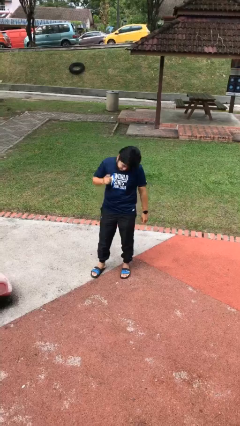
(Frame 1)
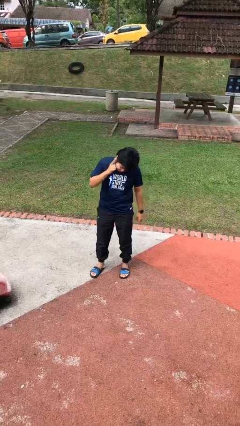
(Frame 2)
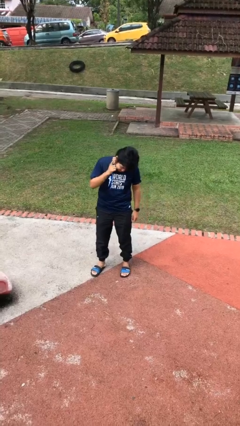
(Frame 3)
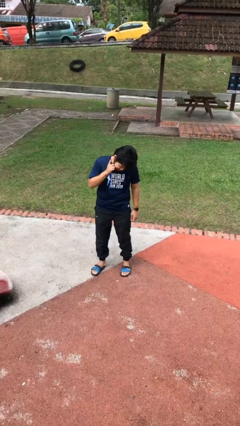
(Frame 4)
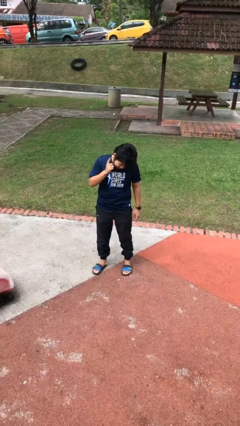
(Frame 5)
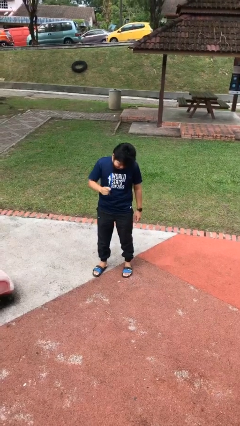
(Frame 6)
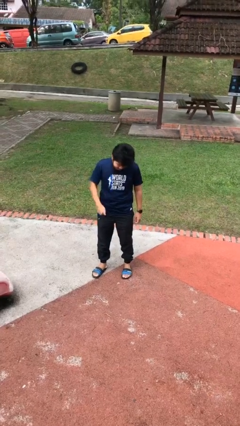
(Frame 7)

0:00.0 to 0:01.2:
person gestures listen closely

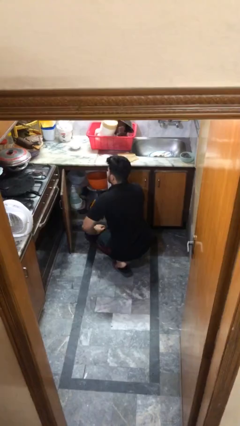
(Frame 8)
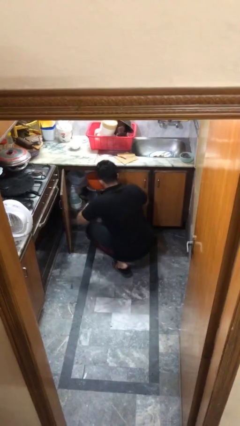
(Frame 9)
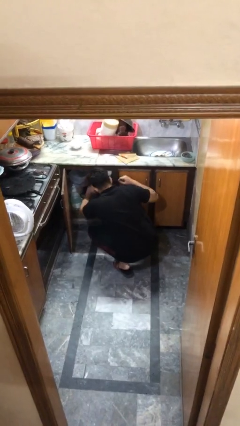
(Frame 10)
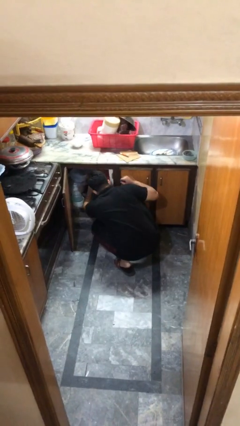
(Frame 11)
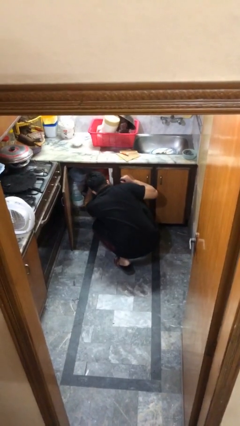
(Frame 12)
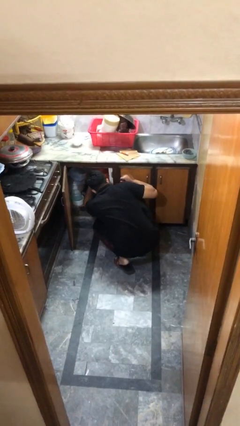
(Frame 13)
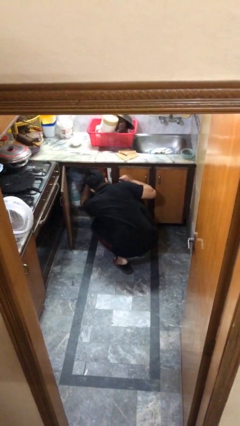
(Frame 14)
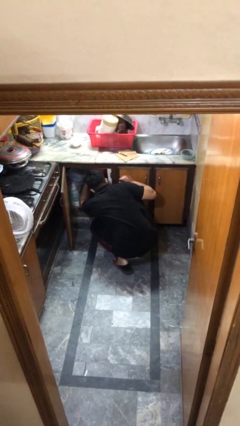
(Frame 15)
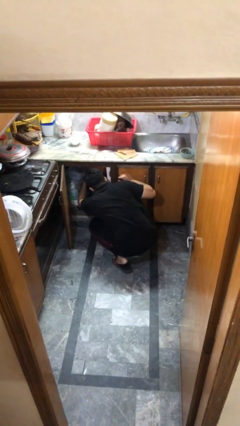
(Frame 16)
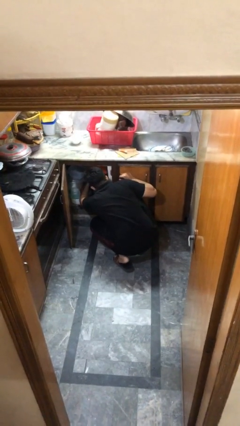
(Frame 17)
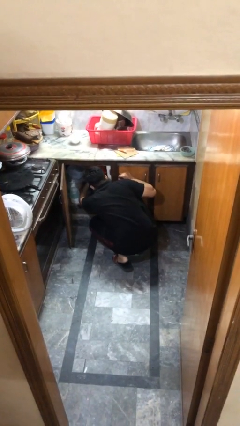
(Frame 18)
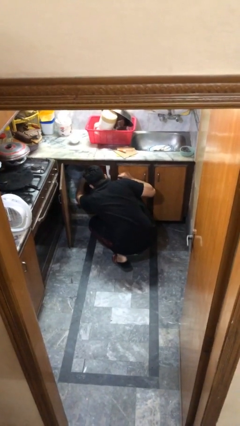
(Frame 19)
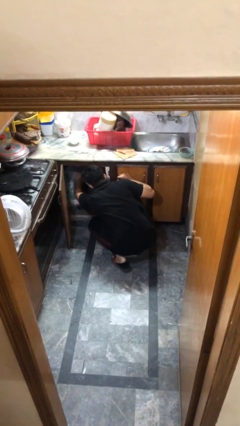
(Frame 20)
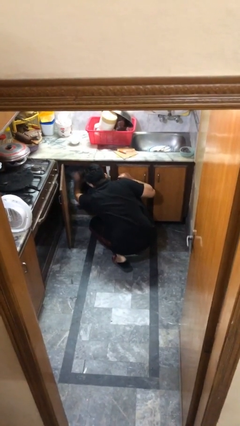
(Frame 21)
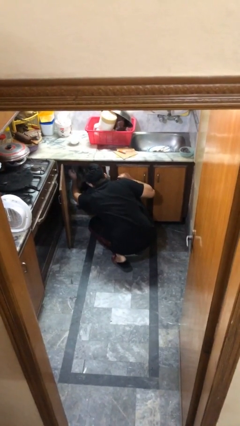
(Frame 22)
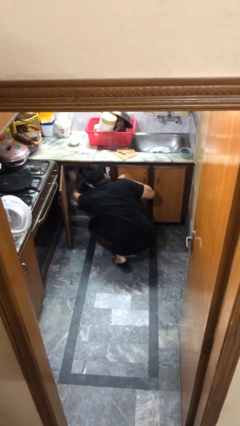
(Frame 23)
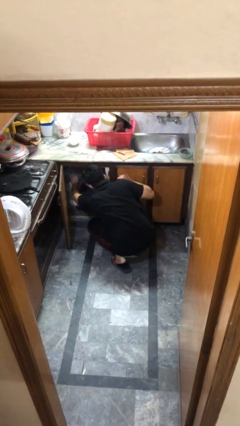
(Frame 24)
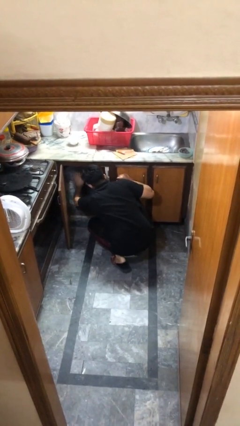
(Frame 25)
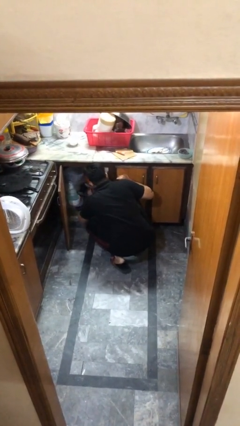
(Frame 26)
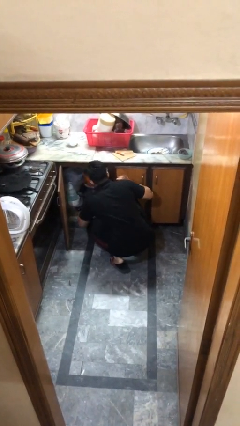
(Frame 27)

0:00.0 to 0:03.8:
person searches in kitchen drawer

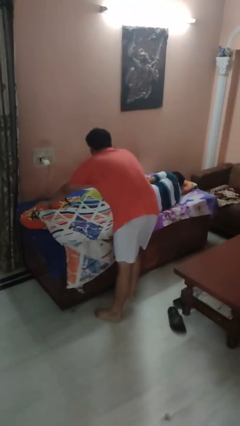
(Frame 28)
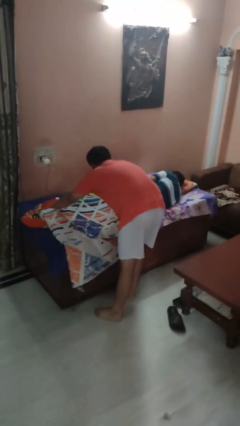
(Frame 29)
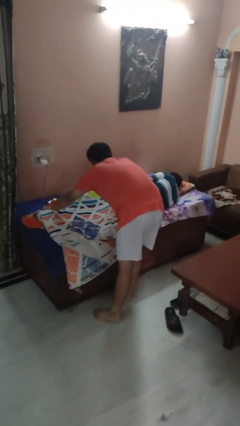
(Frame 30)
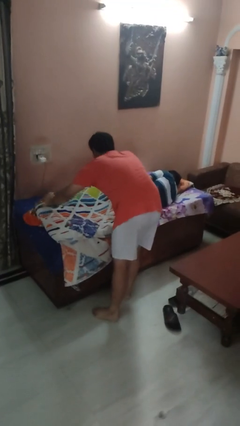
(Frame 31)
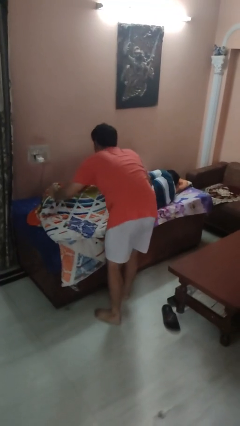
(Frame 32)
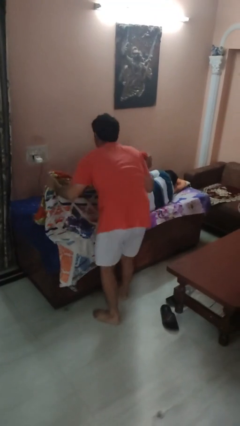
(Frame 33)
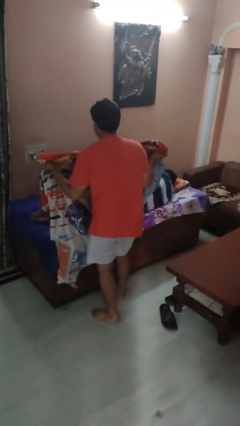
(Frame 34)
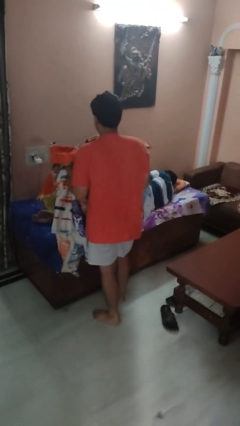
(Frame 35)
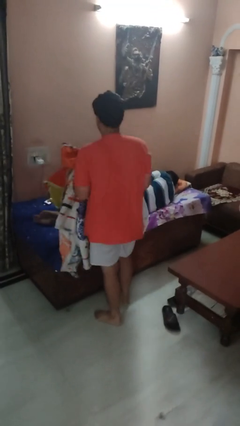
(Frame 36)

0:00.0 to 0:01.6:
person uncovers friend with blanket

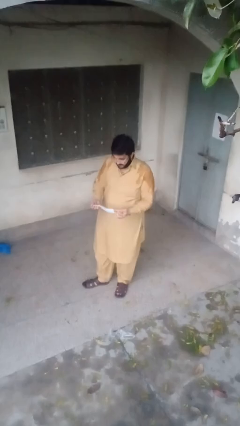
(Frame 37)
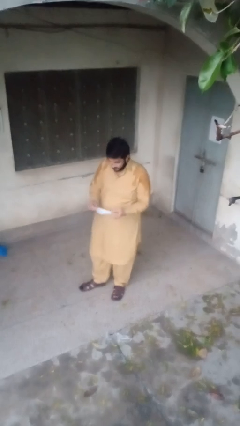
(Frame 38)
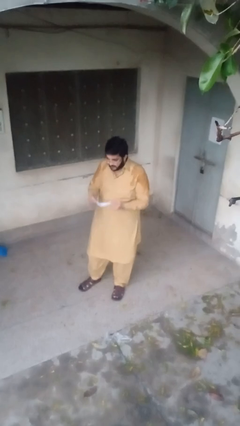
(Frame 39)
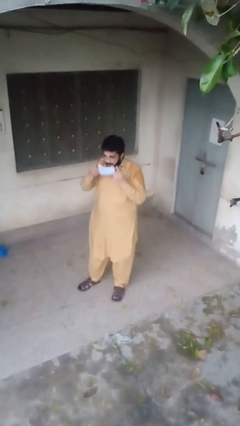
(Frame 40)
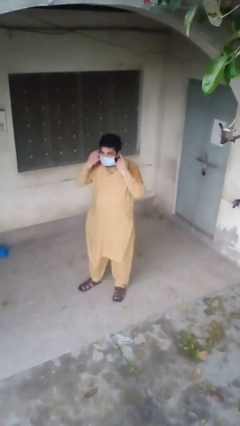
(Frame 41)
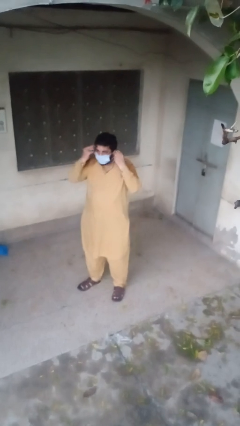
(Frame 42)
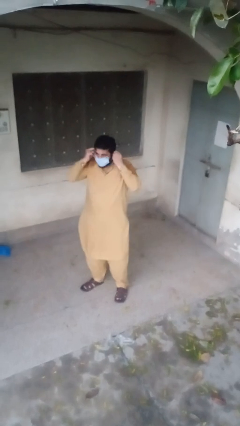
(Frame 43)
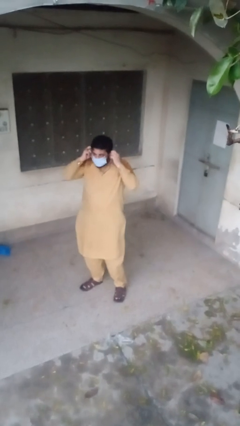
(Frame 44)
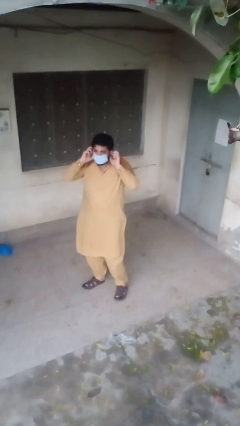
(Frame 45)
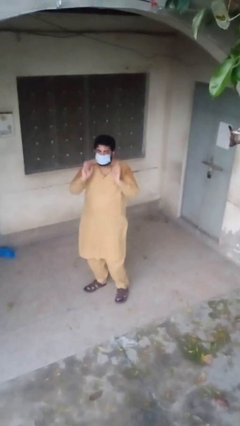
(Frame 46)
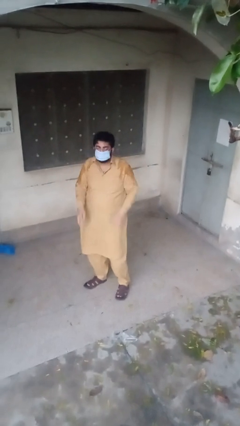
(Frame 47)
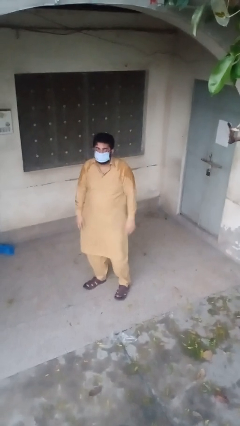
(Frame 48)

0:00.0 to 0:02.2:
person puts on facemask

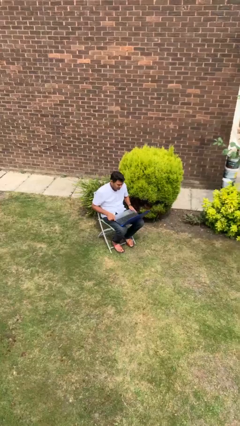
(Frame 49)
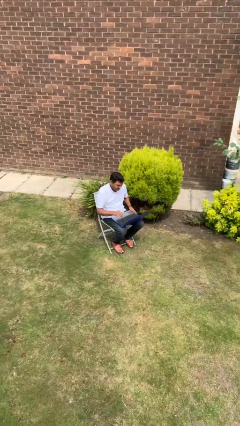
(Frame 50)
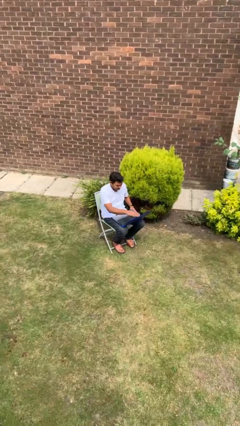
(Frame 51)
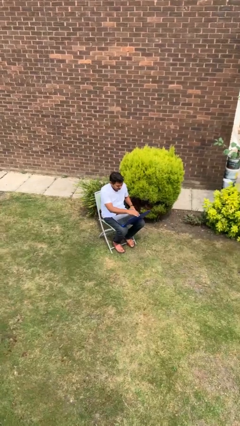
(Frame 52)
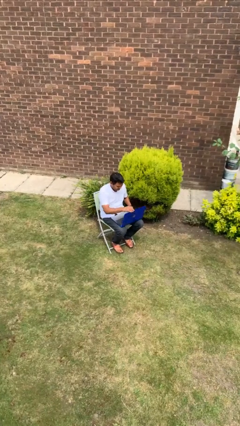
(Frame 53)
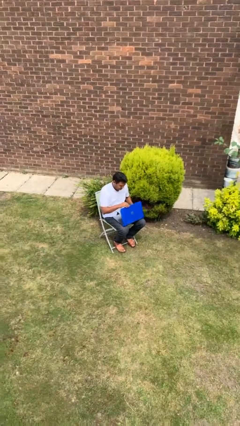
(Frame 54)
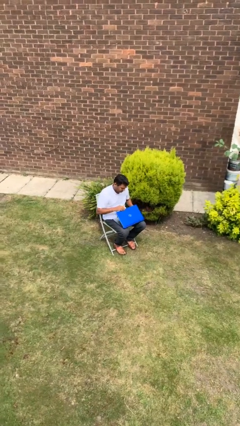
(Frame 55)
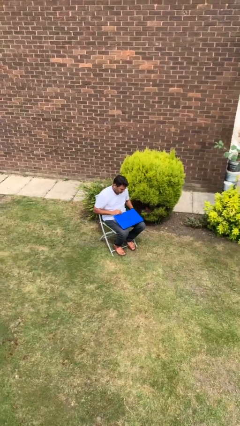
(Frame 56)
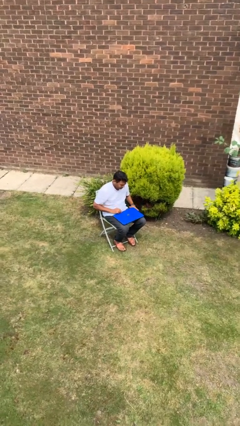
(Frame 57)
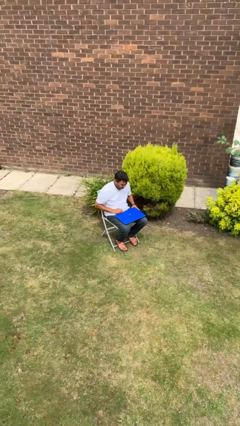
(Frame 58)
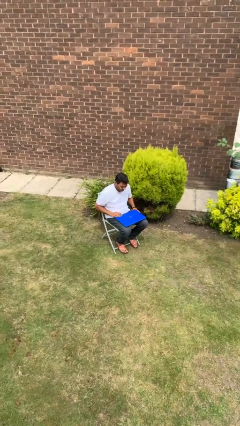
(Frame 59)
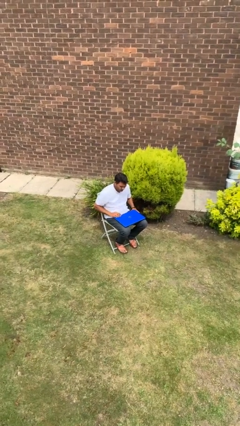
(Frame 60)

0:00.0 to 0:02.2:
person closes laptop

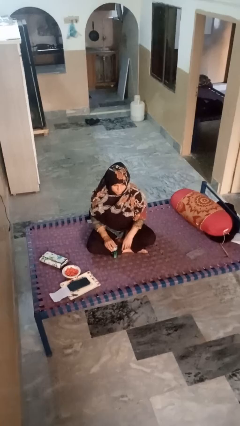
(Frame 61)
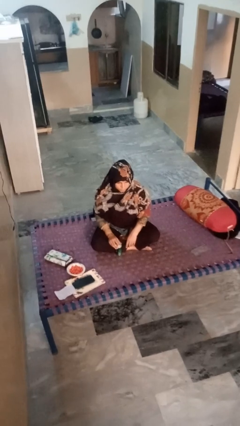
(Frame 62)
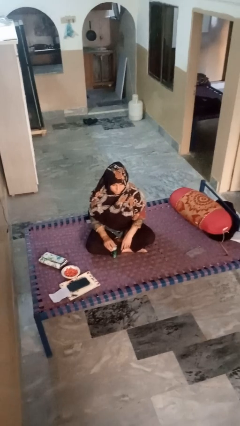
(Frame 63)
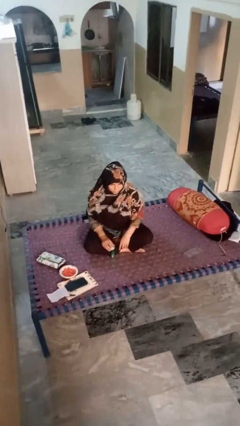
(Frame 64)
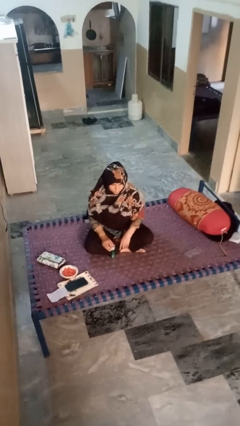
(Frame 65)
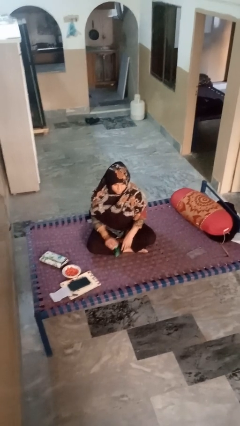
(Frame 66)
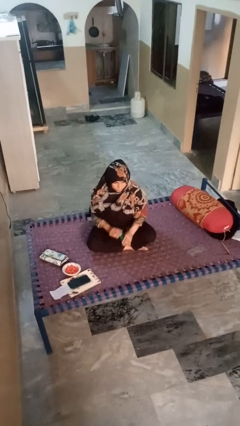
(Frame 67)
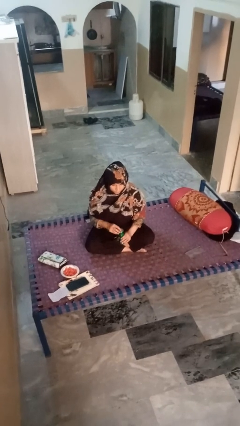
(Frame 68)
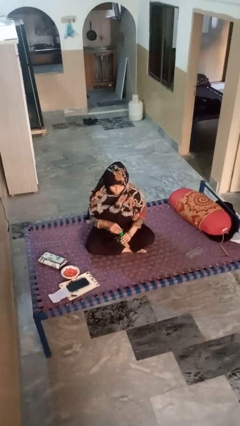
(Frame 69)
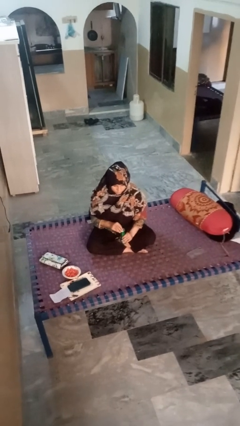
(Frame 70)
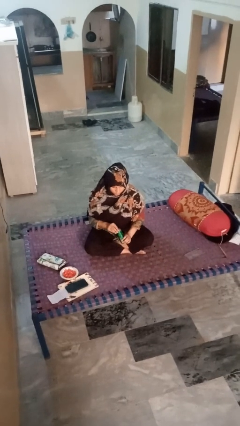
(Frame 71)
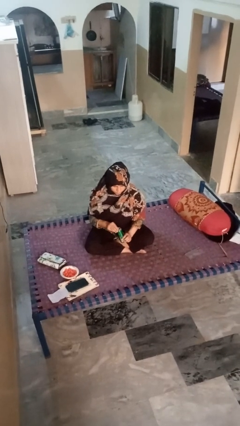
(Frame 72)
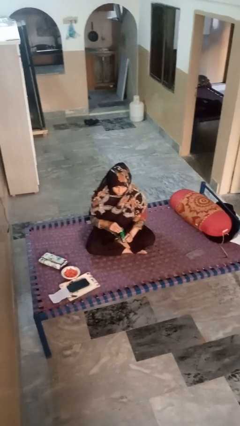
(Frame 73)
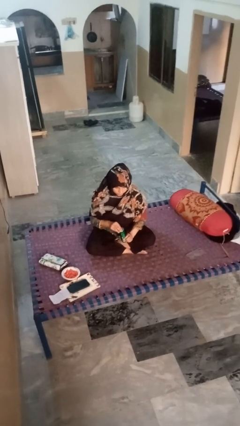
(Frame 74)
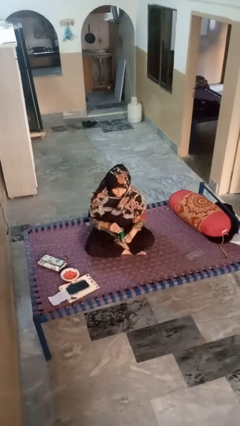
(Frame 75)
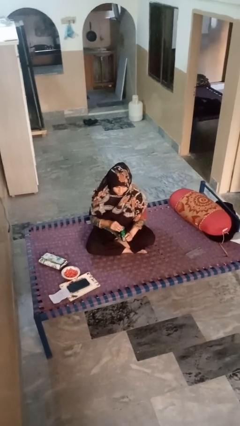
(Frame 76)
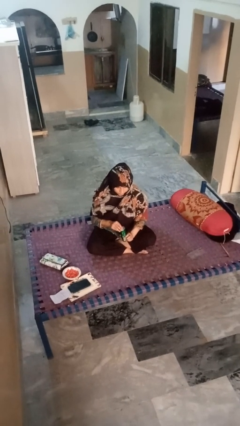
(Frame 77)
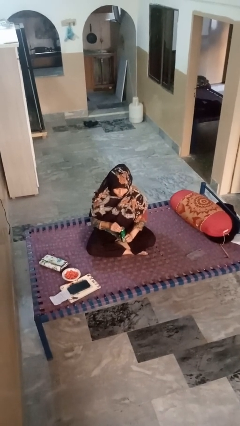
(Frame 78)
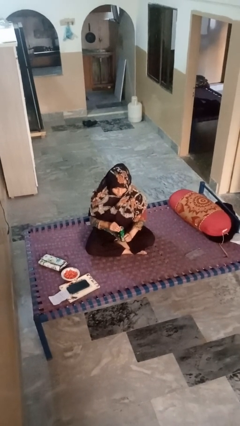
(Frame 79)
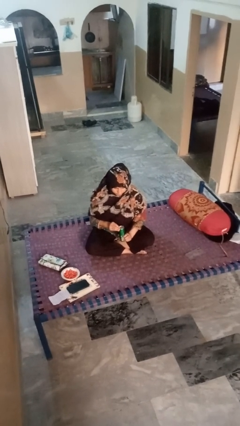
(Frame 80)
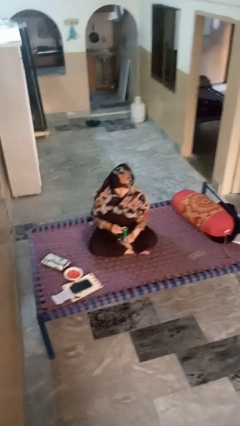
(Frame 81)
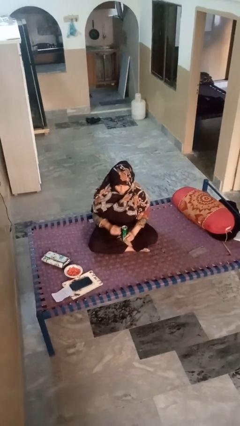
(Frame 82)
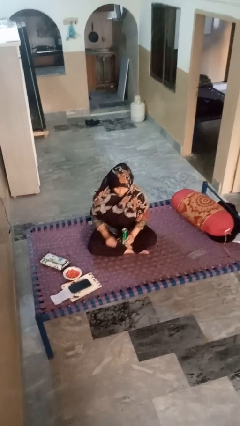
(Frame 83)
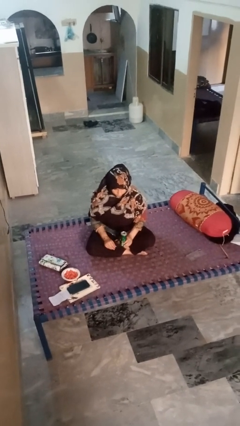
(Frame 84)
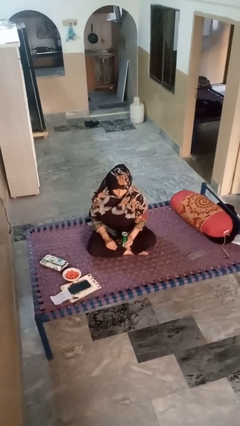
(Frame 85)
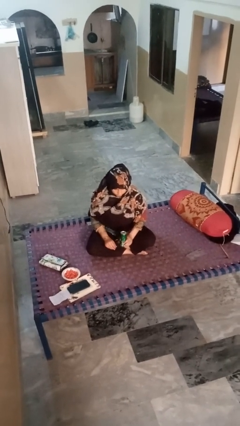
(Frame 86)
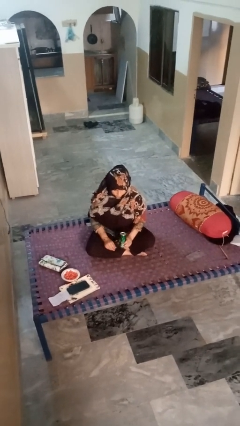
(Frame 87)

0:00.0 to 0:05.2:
person opens can with can opener

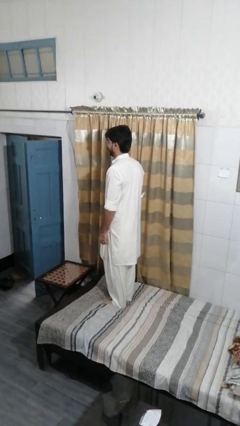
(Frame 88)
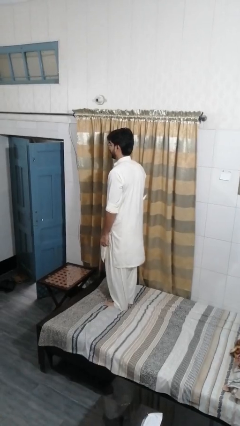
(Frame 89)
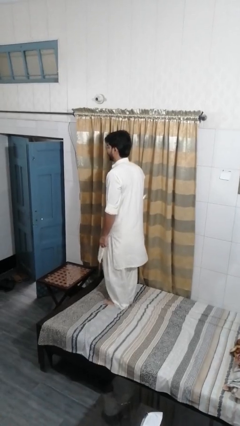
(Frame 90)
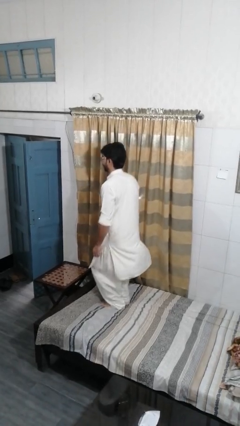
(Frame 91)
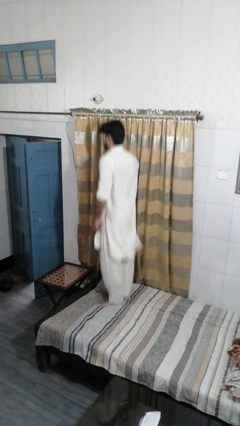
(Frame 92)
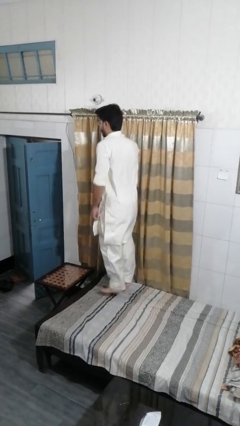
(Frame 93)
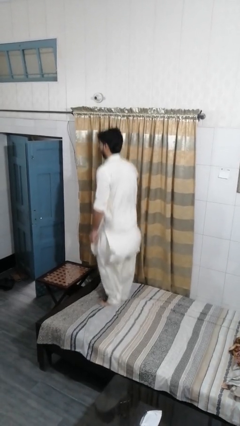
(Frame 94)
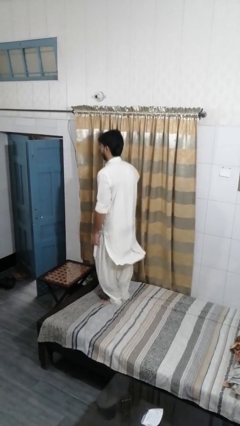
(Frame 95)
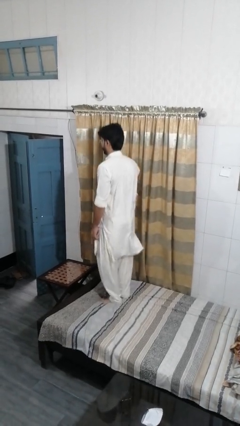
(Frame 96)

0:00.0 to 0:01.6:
person jumps on bed
